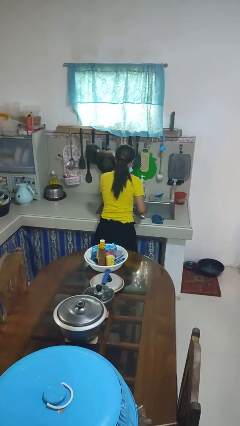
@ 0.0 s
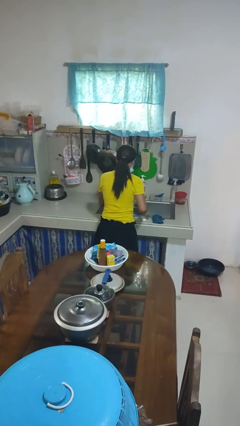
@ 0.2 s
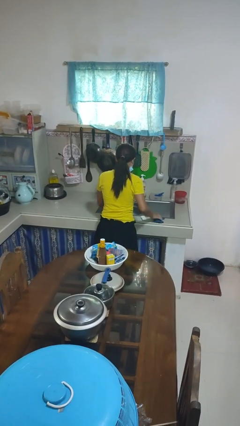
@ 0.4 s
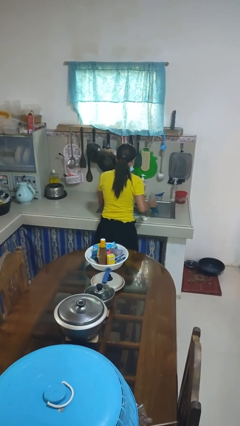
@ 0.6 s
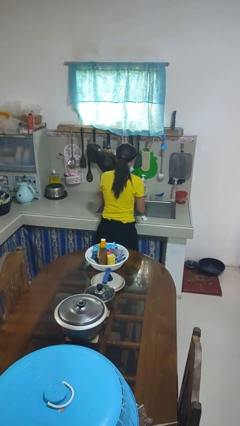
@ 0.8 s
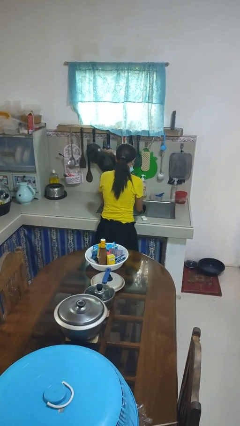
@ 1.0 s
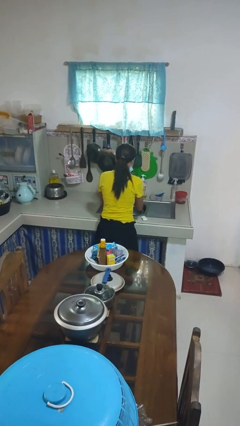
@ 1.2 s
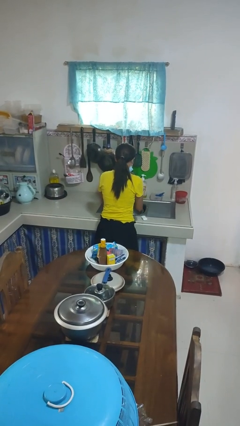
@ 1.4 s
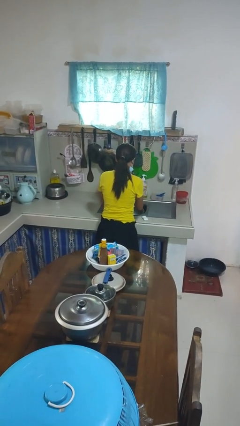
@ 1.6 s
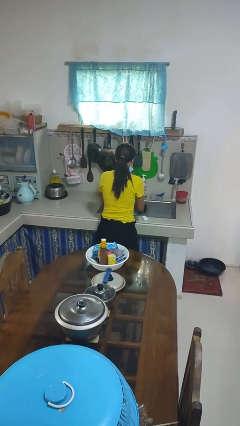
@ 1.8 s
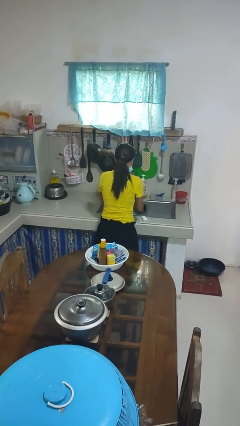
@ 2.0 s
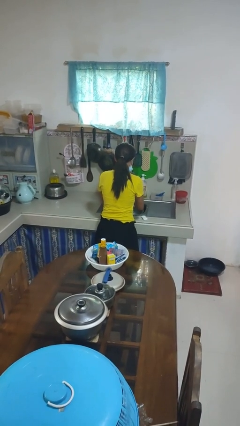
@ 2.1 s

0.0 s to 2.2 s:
person dries hands with towel

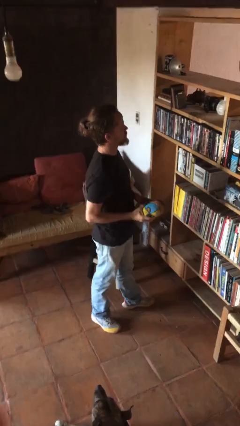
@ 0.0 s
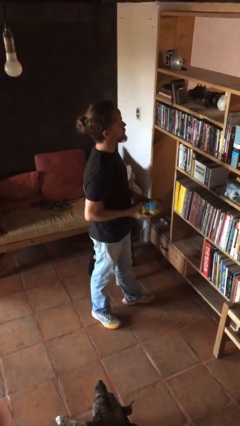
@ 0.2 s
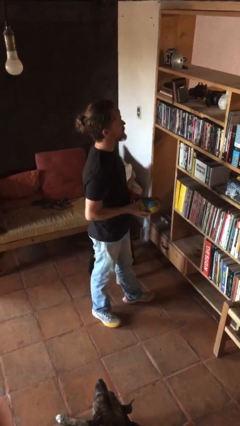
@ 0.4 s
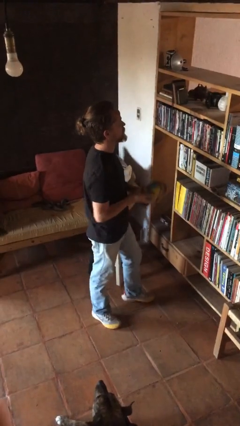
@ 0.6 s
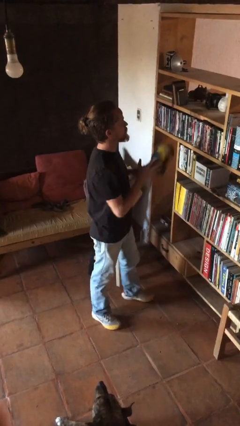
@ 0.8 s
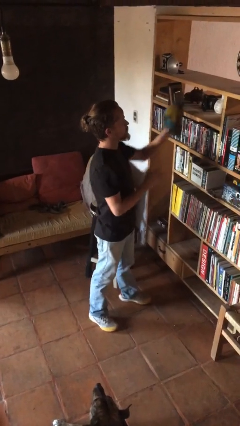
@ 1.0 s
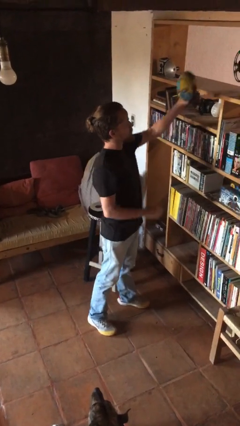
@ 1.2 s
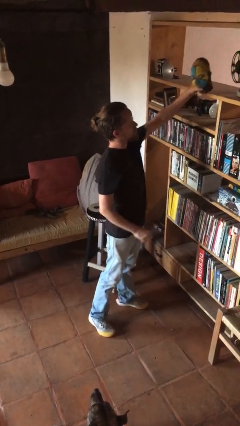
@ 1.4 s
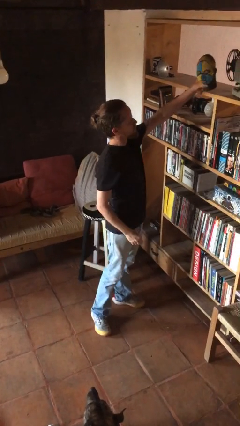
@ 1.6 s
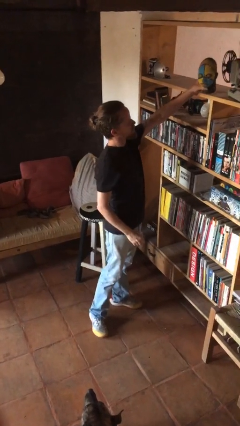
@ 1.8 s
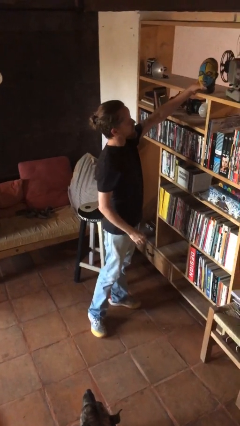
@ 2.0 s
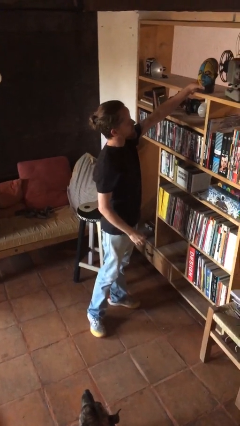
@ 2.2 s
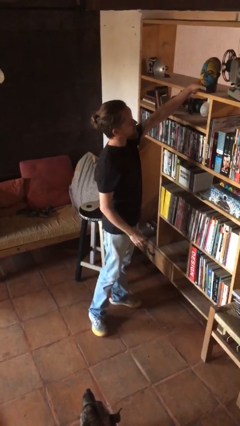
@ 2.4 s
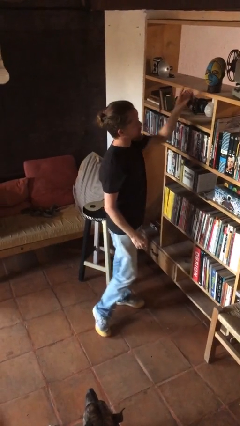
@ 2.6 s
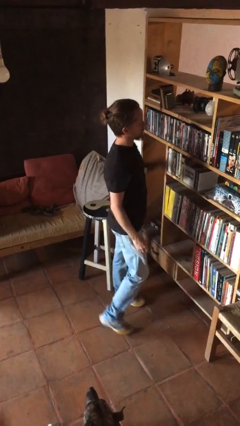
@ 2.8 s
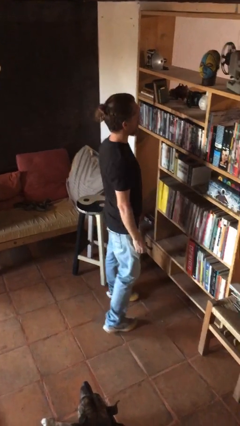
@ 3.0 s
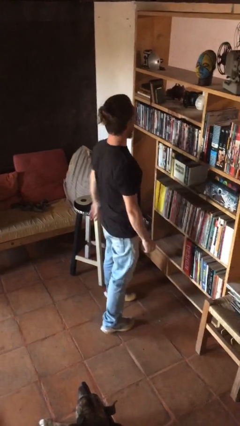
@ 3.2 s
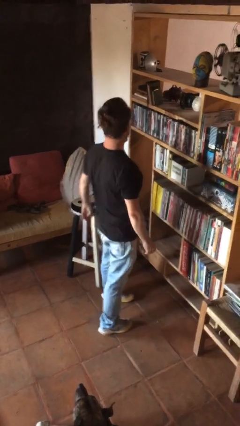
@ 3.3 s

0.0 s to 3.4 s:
person puts down object on countertop

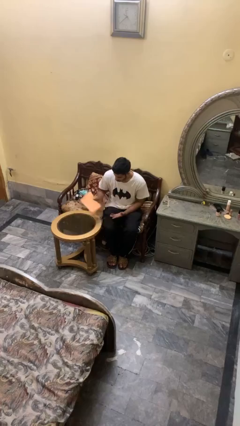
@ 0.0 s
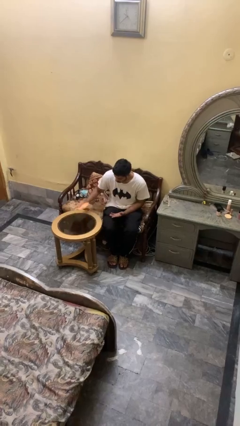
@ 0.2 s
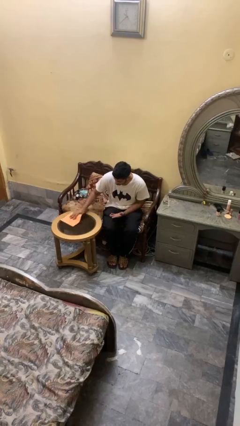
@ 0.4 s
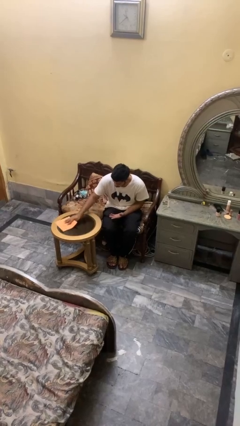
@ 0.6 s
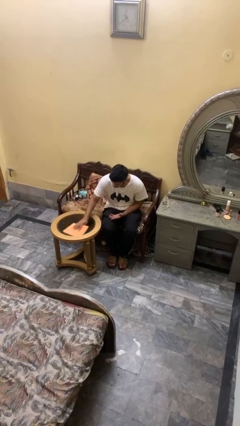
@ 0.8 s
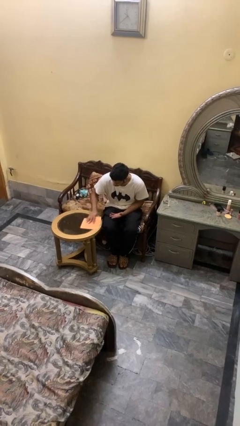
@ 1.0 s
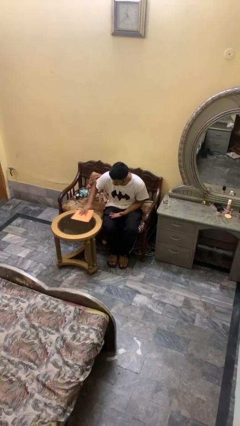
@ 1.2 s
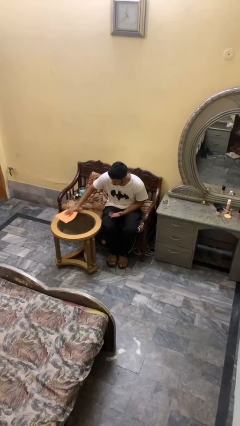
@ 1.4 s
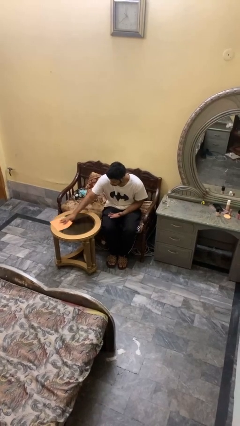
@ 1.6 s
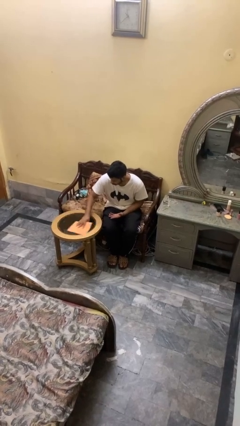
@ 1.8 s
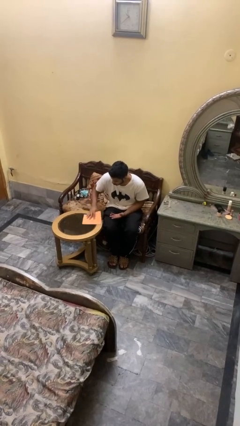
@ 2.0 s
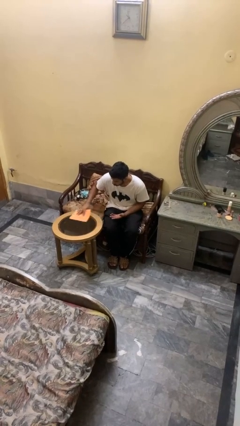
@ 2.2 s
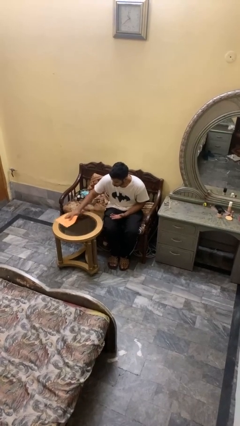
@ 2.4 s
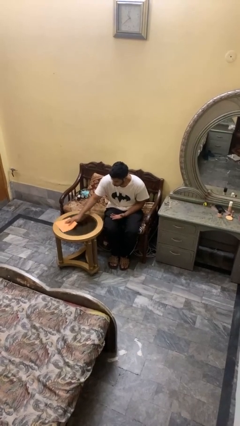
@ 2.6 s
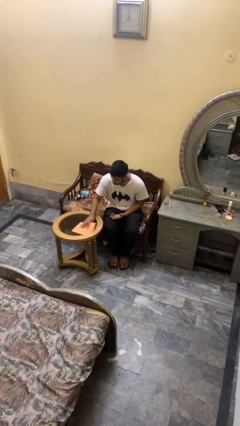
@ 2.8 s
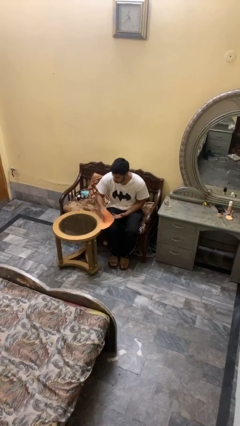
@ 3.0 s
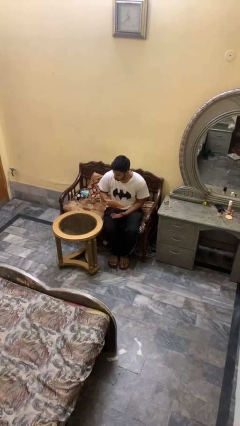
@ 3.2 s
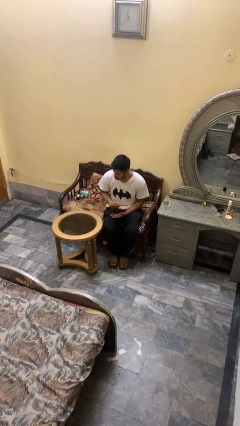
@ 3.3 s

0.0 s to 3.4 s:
person cleans table with rag

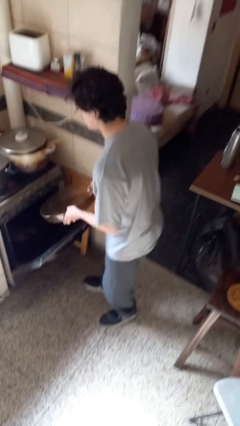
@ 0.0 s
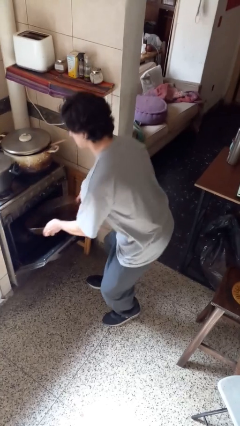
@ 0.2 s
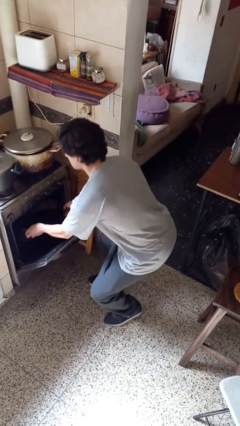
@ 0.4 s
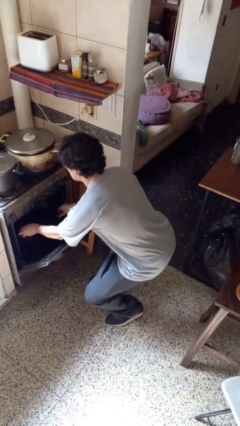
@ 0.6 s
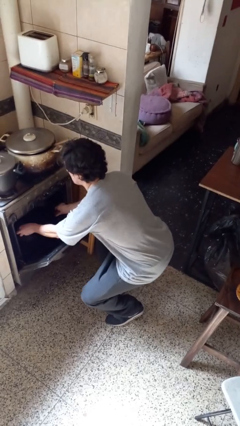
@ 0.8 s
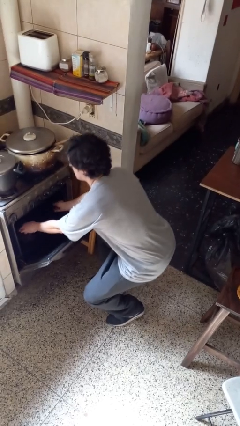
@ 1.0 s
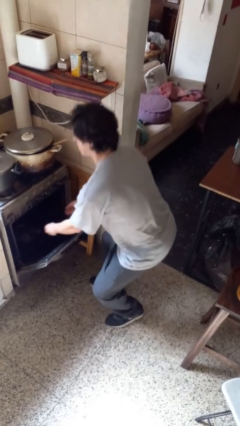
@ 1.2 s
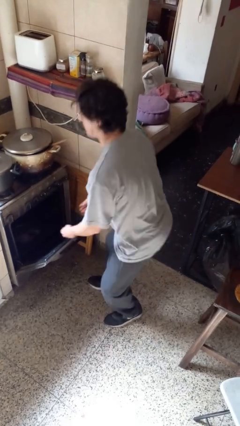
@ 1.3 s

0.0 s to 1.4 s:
person puts object into oven

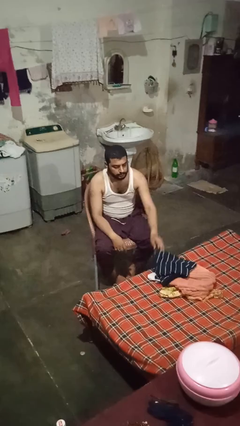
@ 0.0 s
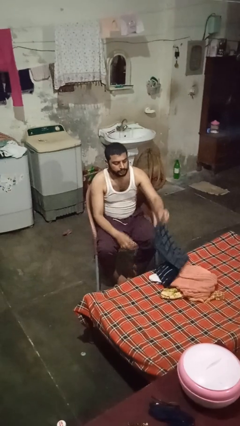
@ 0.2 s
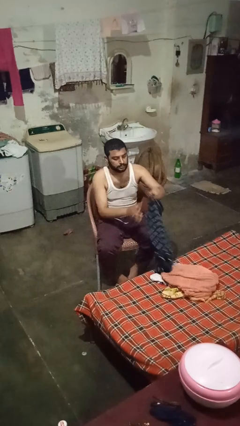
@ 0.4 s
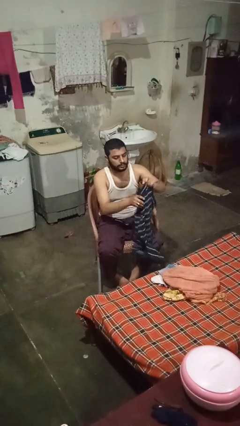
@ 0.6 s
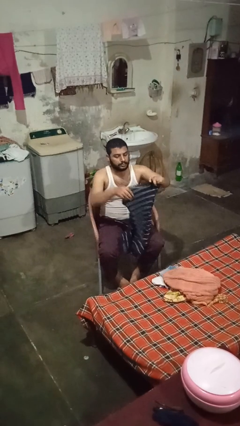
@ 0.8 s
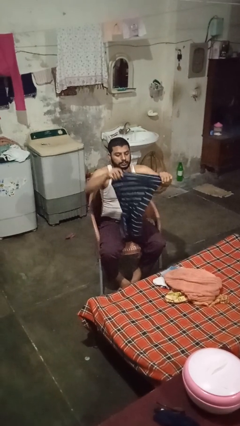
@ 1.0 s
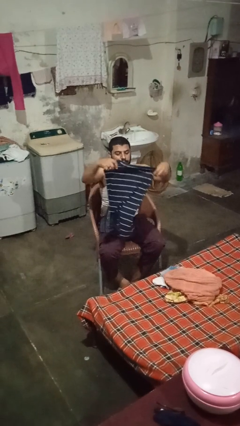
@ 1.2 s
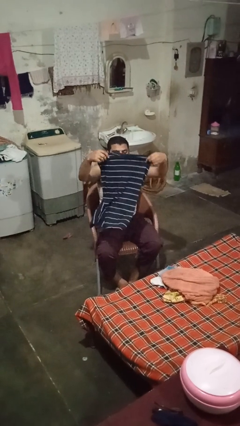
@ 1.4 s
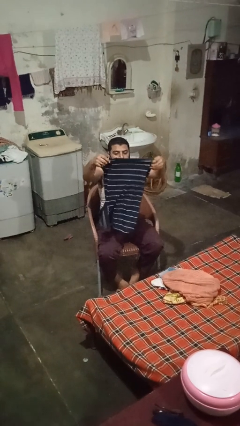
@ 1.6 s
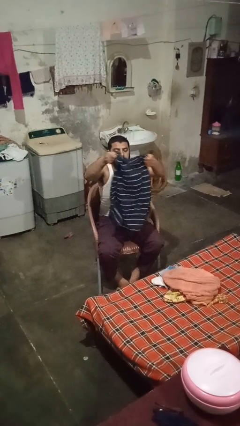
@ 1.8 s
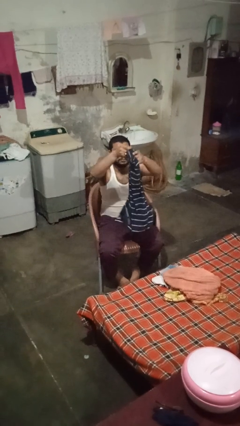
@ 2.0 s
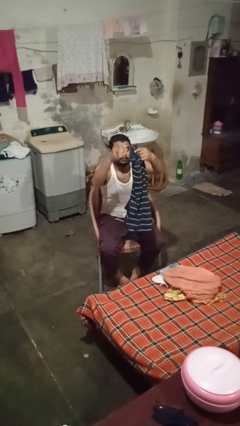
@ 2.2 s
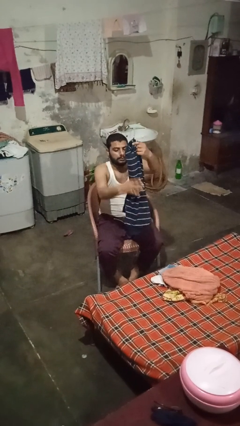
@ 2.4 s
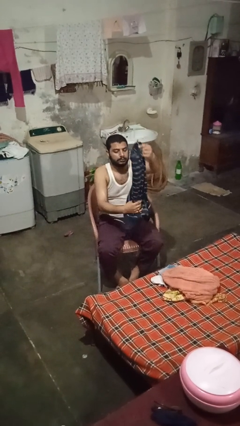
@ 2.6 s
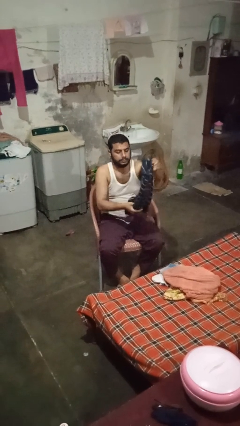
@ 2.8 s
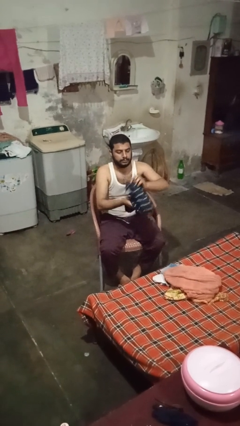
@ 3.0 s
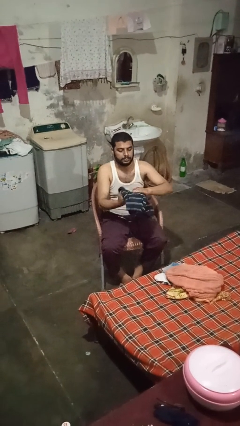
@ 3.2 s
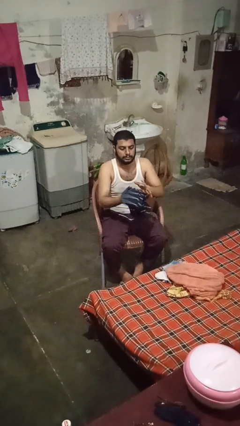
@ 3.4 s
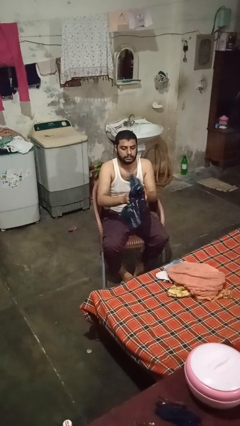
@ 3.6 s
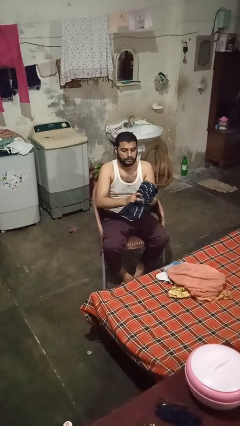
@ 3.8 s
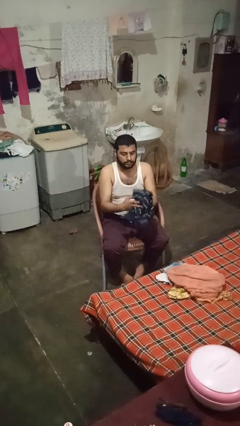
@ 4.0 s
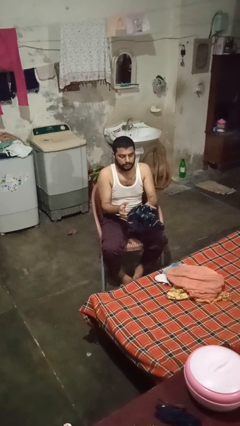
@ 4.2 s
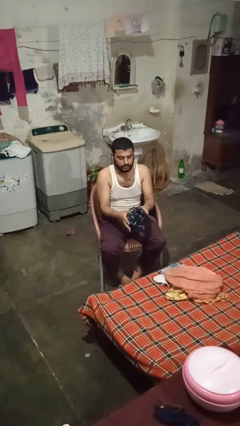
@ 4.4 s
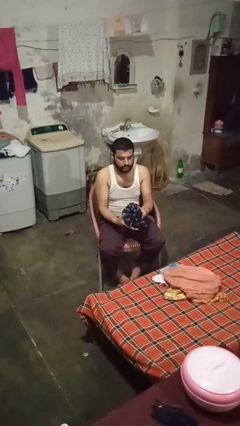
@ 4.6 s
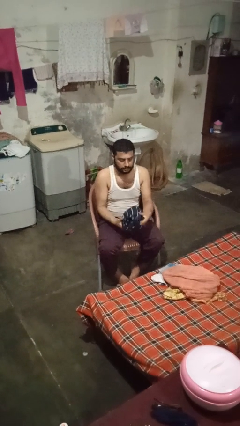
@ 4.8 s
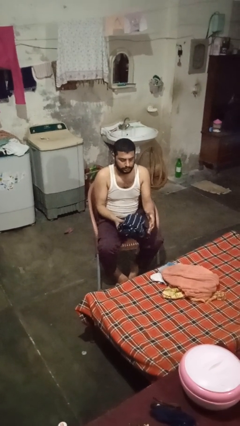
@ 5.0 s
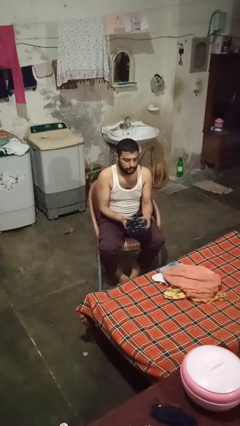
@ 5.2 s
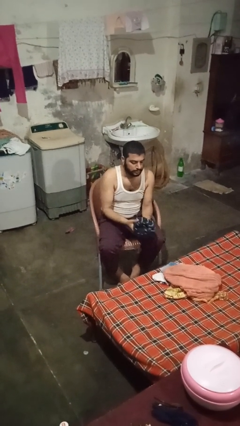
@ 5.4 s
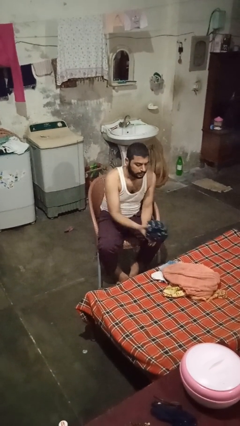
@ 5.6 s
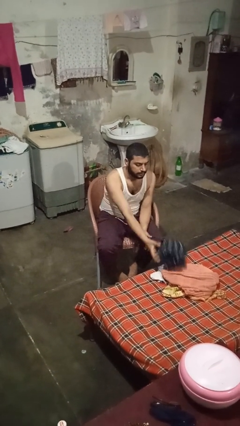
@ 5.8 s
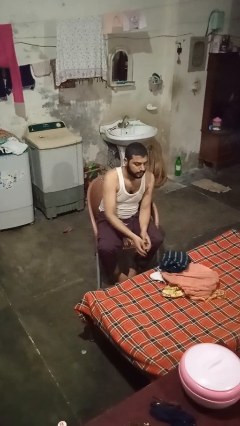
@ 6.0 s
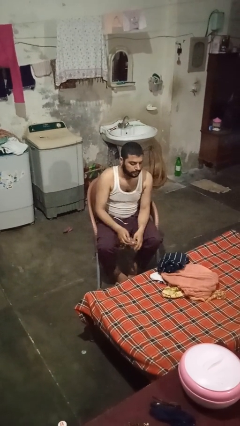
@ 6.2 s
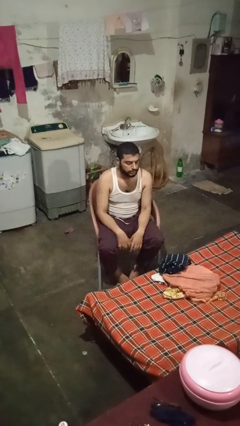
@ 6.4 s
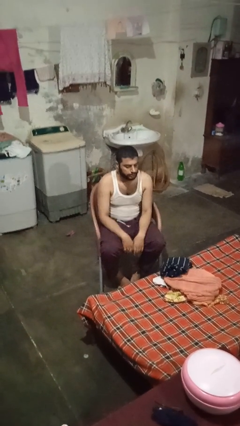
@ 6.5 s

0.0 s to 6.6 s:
person folds shirt

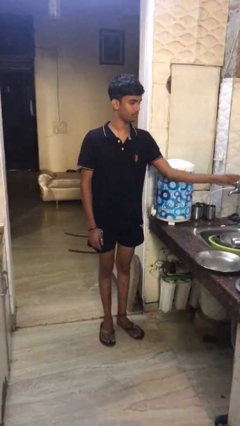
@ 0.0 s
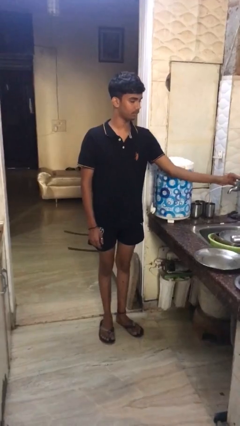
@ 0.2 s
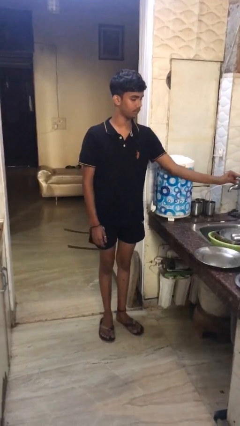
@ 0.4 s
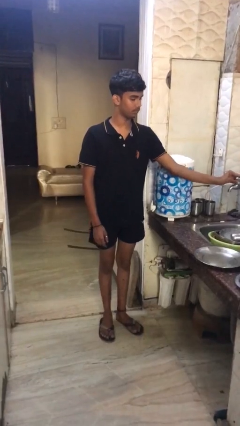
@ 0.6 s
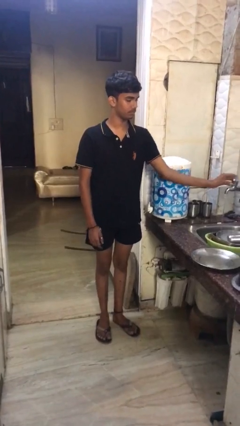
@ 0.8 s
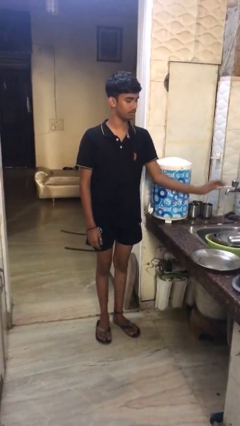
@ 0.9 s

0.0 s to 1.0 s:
person turns on faucet
